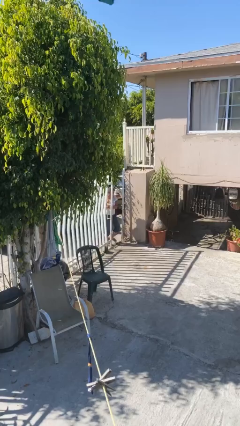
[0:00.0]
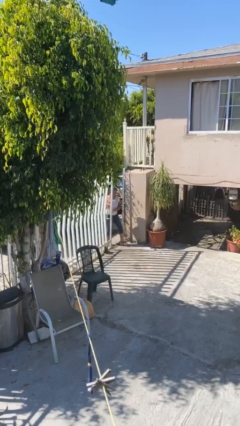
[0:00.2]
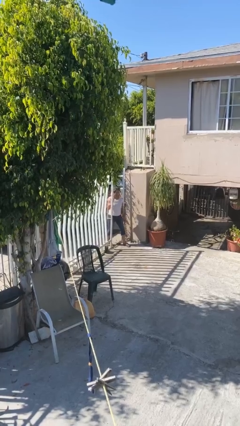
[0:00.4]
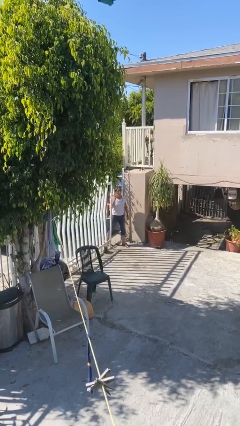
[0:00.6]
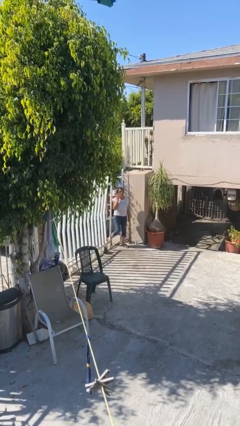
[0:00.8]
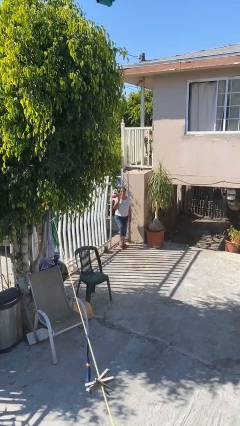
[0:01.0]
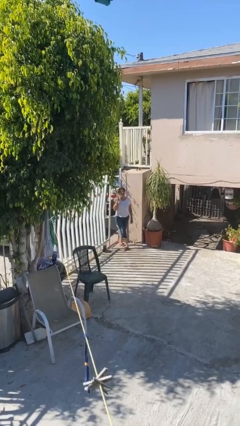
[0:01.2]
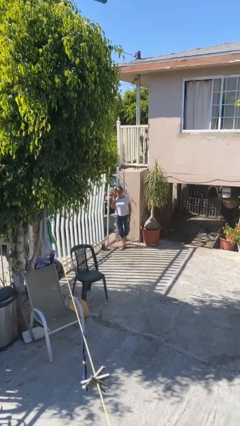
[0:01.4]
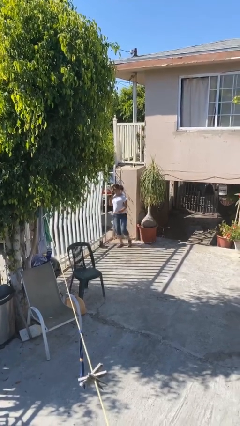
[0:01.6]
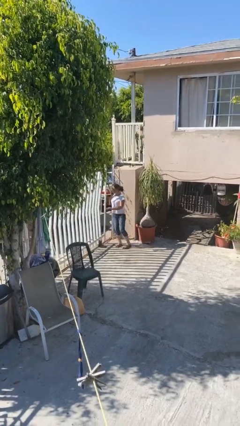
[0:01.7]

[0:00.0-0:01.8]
person enters scene through structure

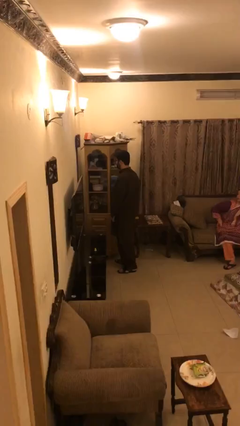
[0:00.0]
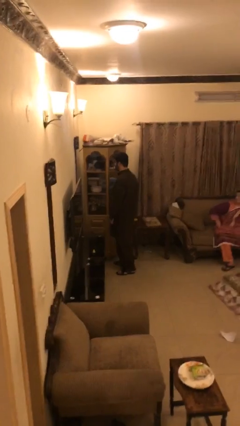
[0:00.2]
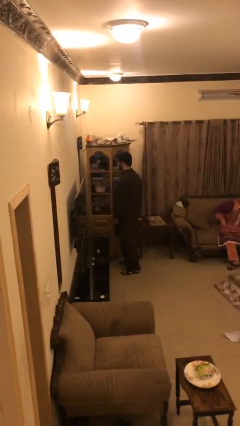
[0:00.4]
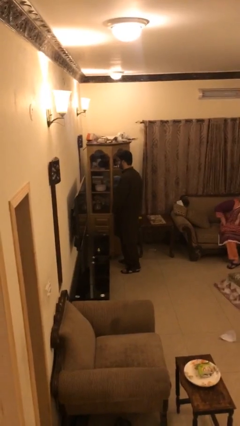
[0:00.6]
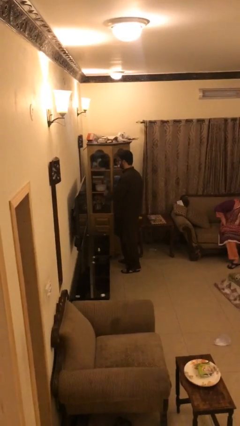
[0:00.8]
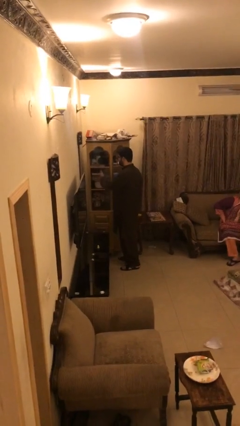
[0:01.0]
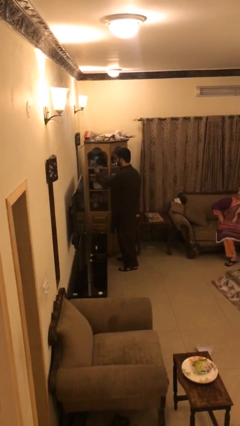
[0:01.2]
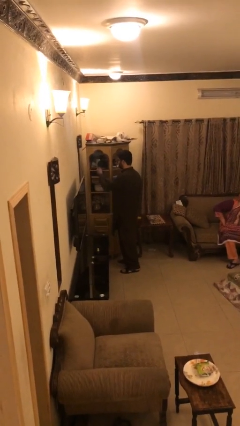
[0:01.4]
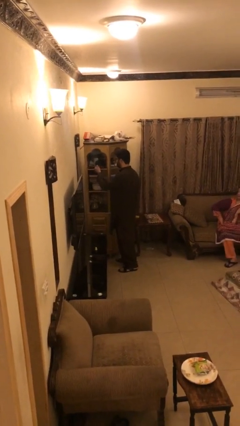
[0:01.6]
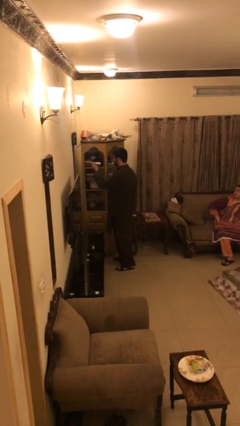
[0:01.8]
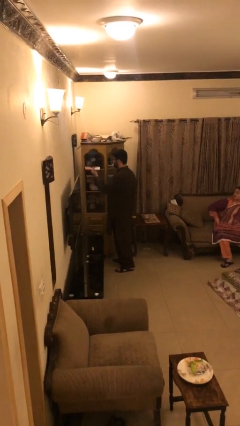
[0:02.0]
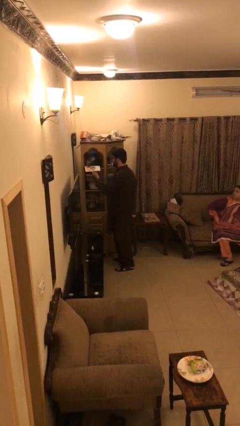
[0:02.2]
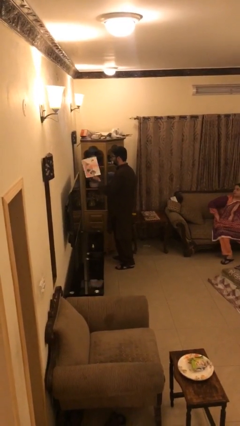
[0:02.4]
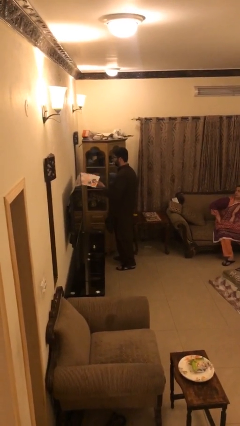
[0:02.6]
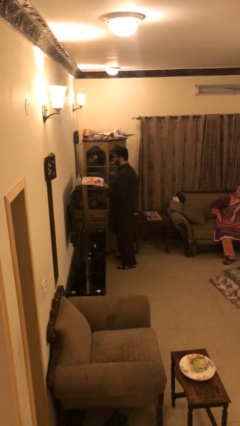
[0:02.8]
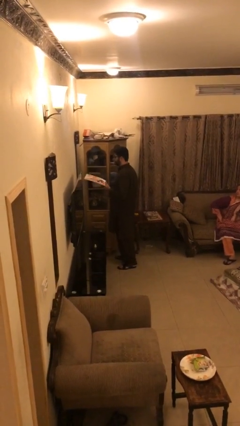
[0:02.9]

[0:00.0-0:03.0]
person picks up object from shelf

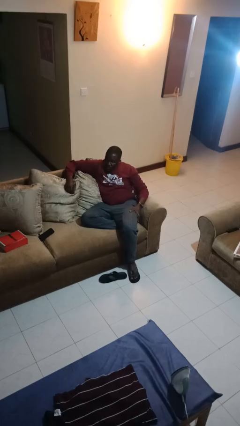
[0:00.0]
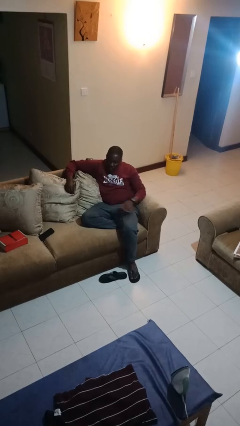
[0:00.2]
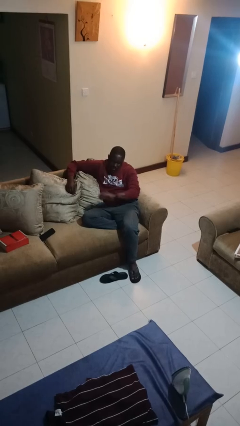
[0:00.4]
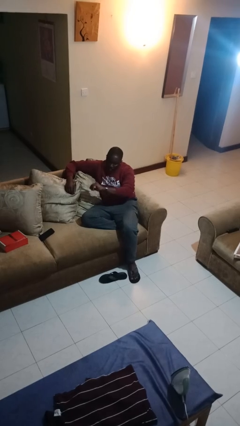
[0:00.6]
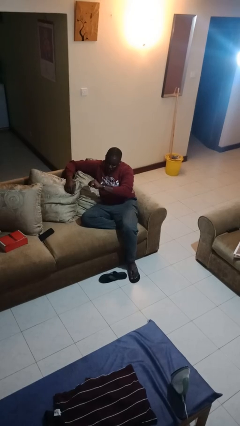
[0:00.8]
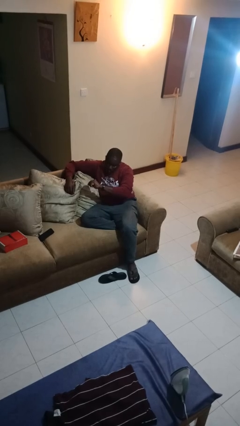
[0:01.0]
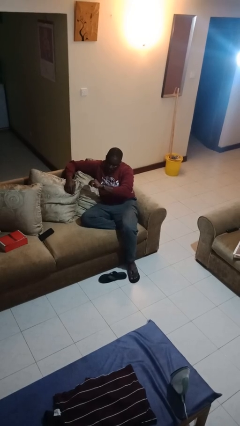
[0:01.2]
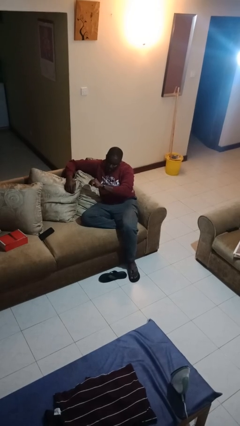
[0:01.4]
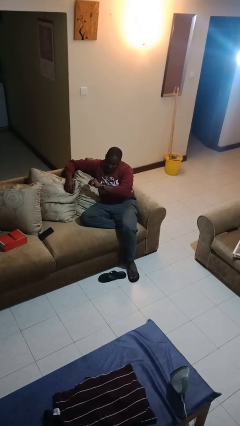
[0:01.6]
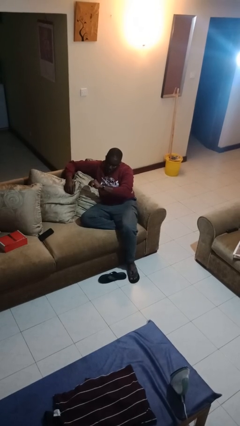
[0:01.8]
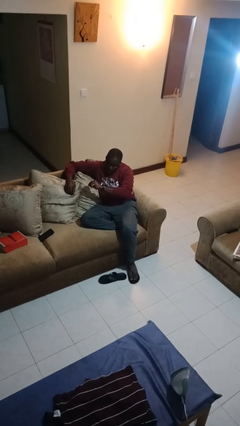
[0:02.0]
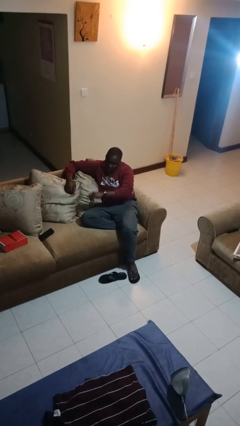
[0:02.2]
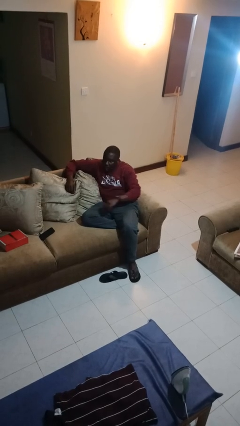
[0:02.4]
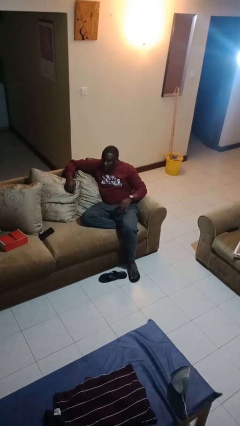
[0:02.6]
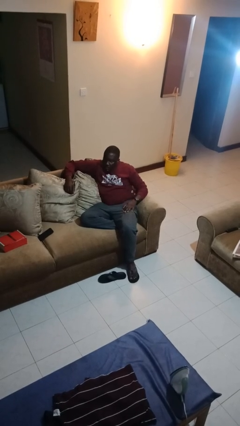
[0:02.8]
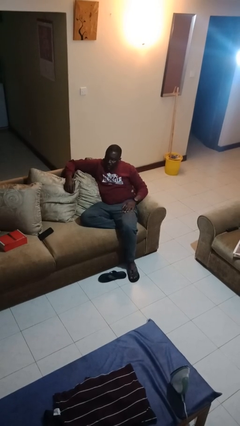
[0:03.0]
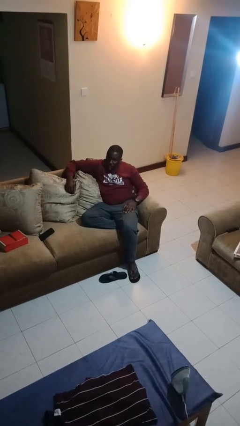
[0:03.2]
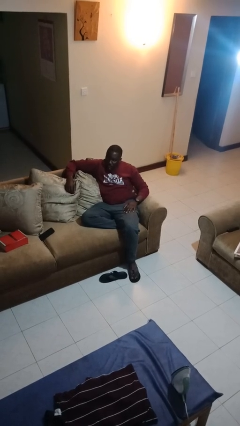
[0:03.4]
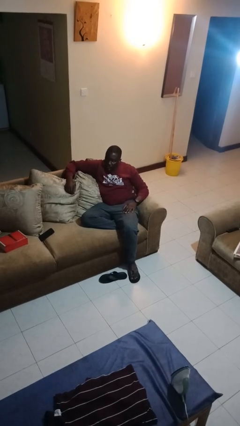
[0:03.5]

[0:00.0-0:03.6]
person looks at wristwatch

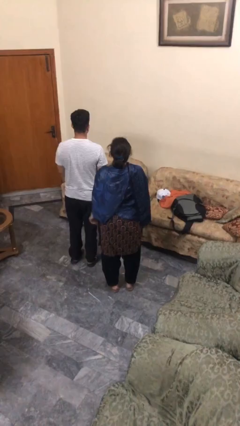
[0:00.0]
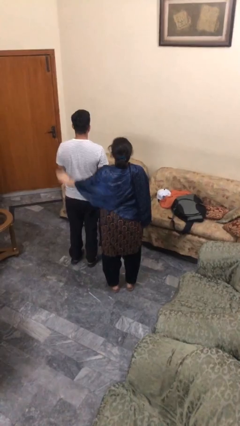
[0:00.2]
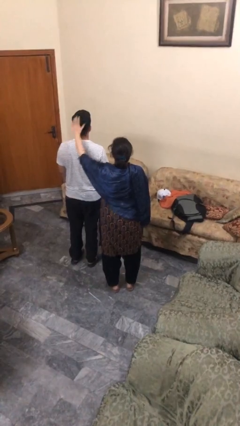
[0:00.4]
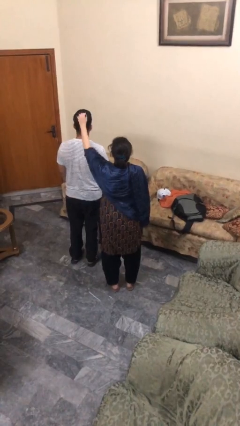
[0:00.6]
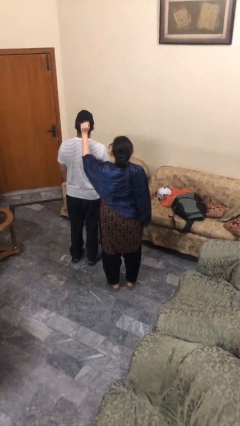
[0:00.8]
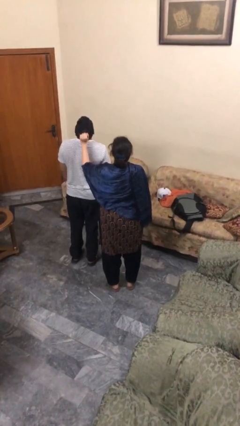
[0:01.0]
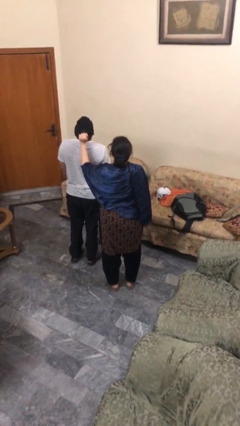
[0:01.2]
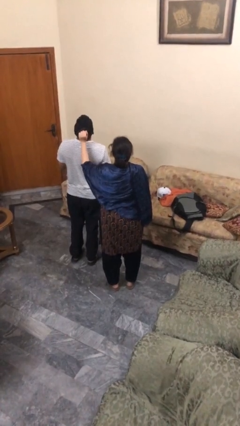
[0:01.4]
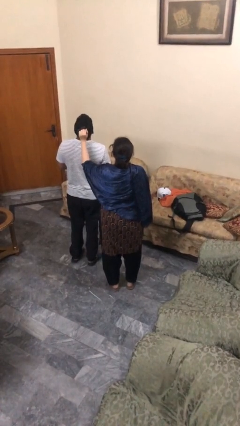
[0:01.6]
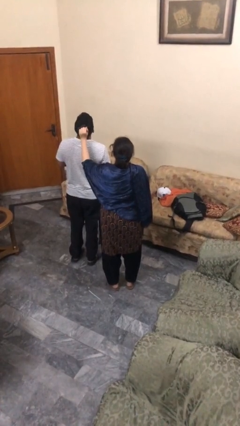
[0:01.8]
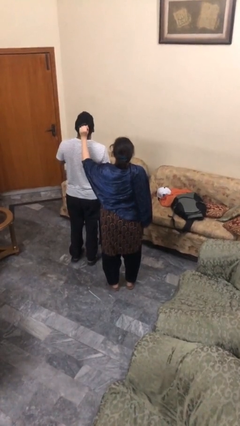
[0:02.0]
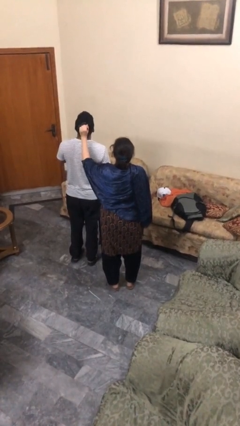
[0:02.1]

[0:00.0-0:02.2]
person grabs person by hair

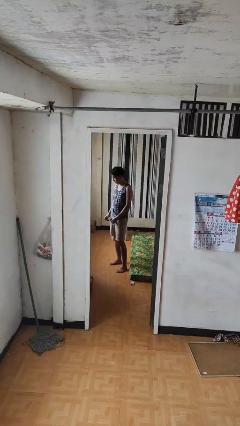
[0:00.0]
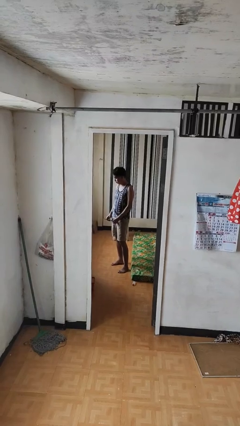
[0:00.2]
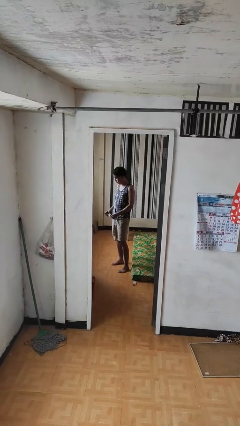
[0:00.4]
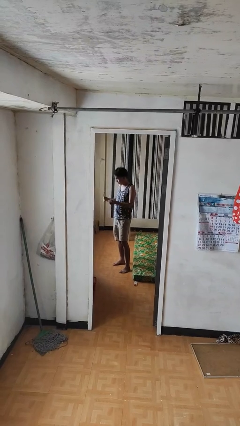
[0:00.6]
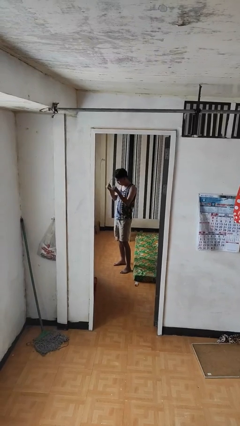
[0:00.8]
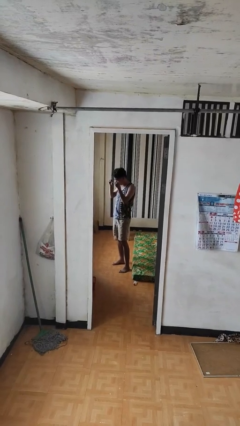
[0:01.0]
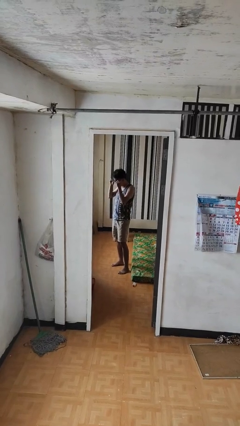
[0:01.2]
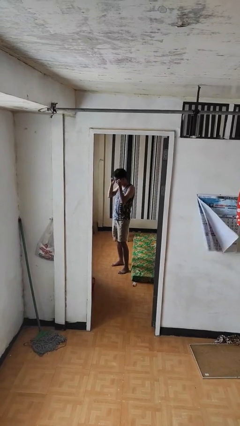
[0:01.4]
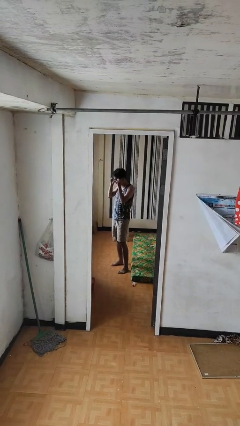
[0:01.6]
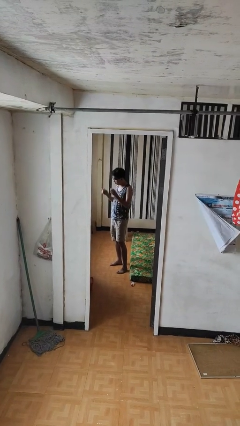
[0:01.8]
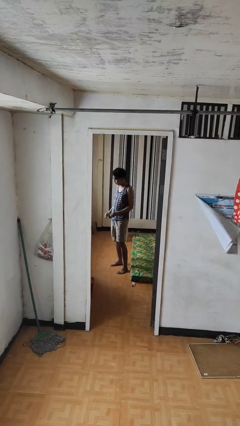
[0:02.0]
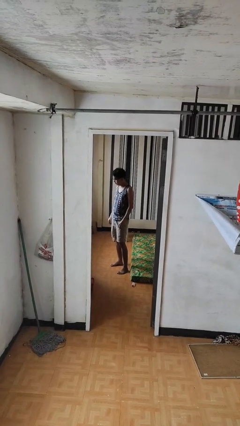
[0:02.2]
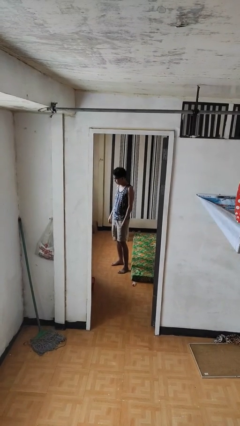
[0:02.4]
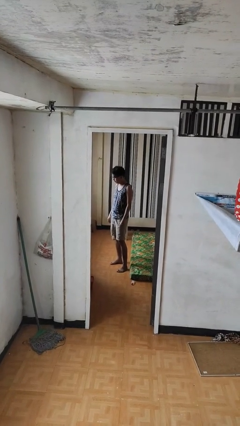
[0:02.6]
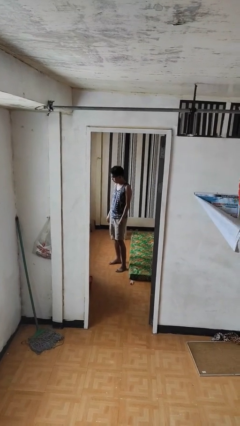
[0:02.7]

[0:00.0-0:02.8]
person puts on glasses

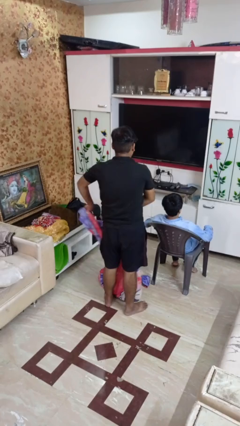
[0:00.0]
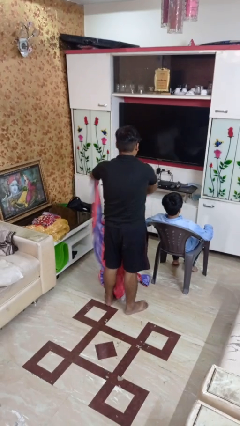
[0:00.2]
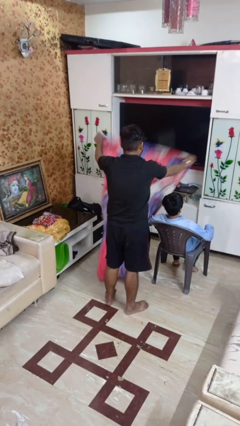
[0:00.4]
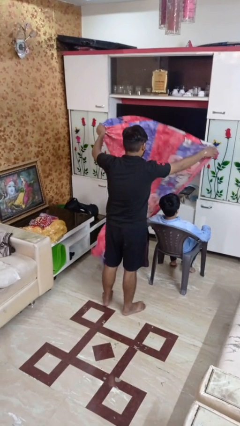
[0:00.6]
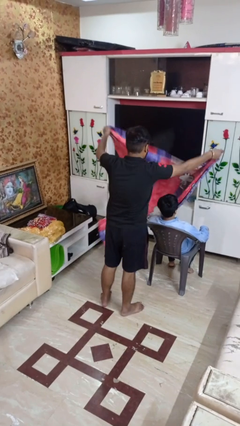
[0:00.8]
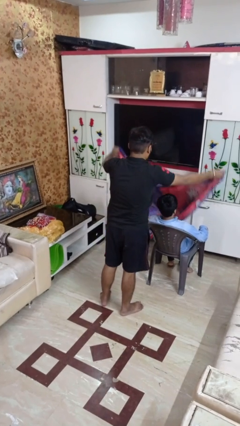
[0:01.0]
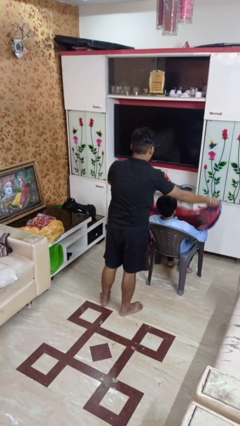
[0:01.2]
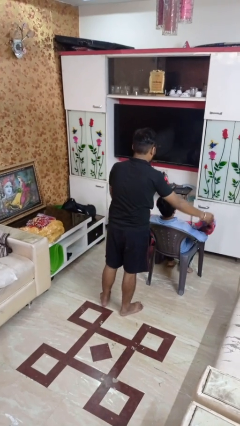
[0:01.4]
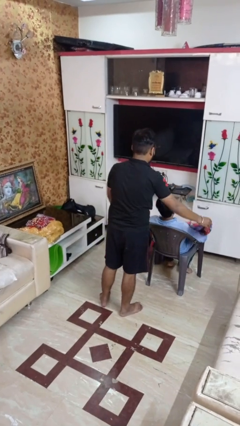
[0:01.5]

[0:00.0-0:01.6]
person covers friend with blanket

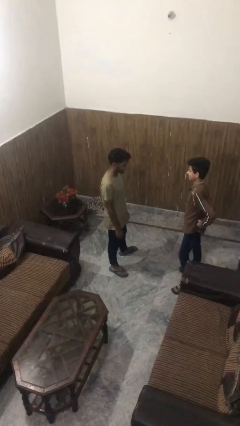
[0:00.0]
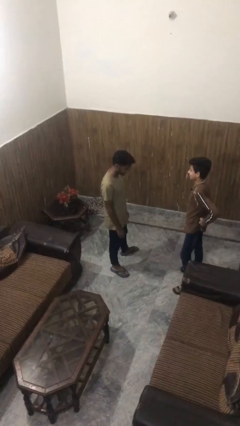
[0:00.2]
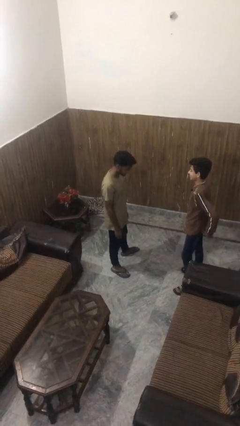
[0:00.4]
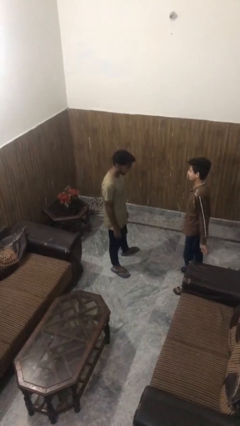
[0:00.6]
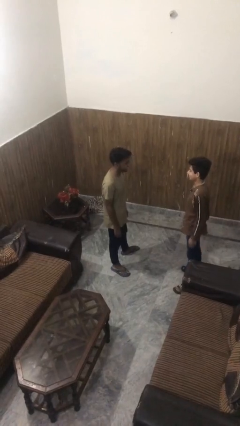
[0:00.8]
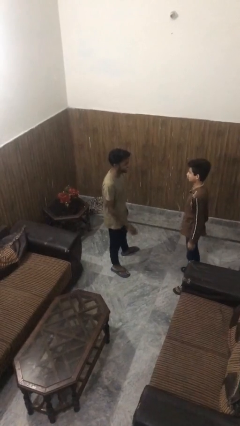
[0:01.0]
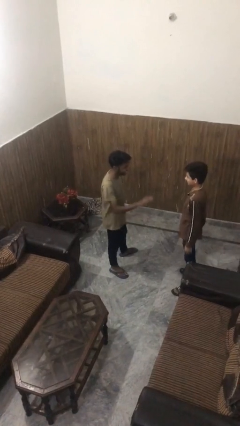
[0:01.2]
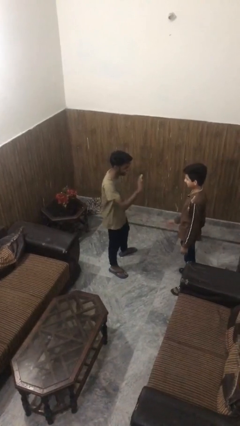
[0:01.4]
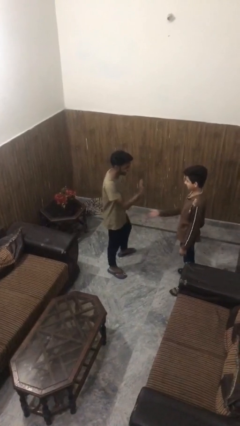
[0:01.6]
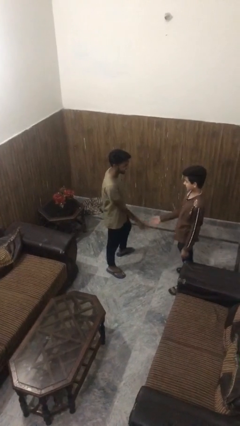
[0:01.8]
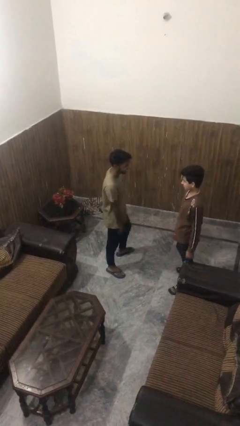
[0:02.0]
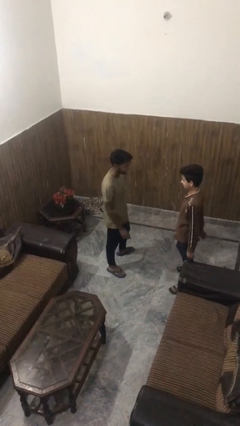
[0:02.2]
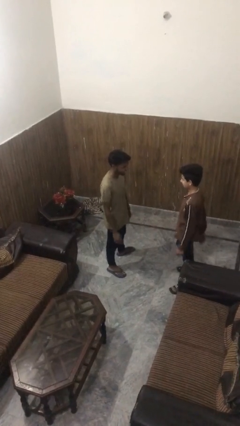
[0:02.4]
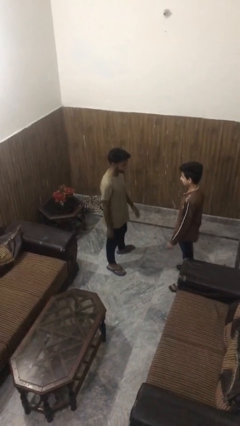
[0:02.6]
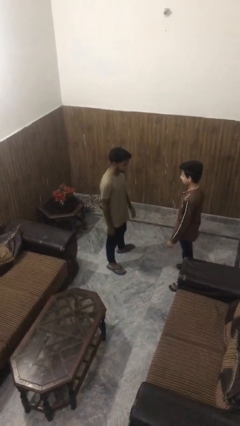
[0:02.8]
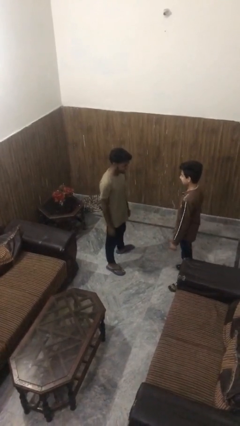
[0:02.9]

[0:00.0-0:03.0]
person laughs with person
